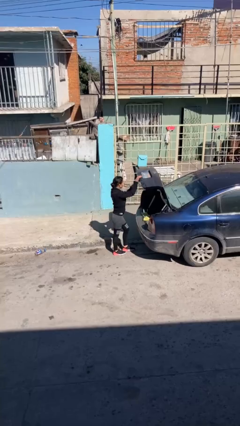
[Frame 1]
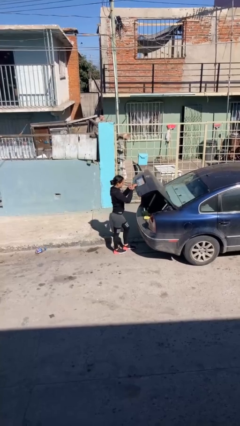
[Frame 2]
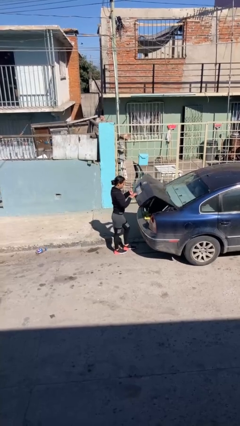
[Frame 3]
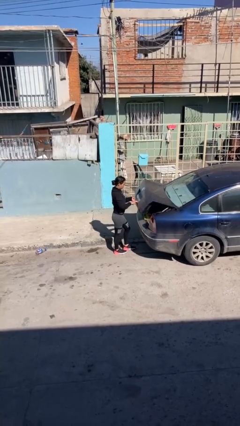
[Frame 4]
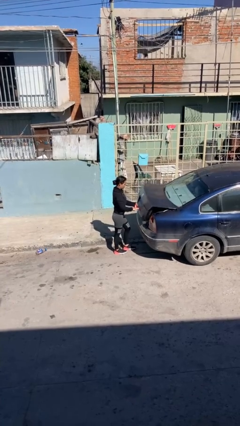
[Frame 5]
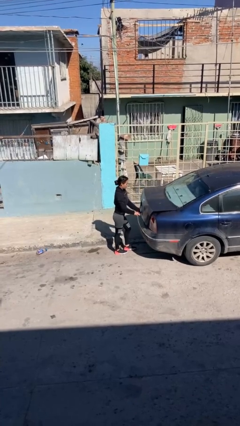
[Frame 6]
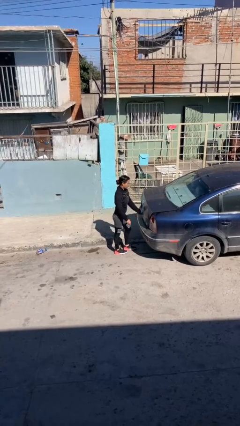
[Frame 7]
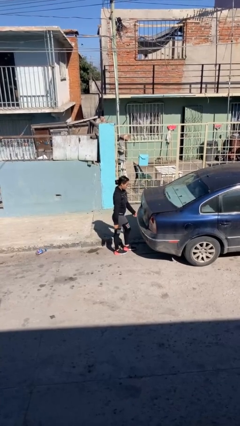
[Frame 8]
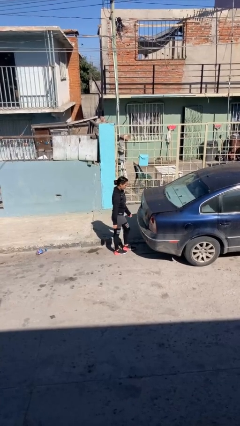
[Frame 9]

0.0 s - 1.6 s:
person closes car trunk

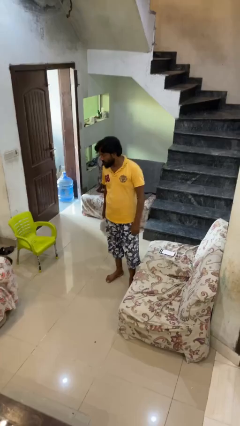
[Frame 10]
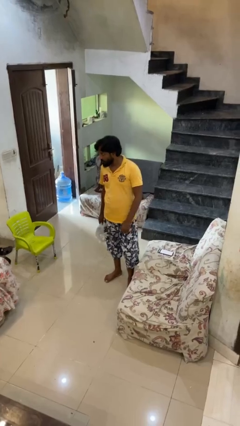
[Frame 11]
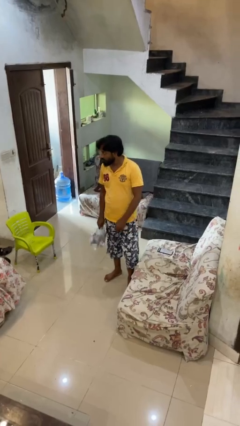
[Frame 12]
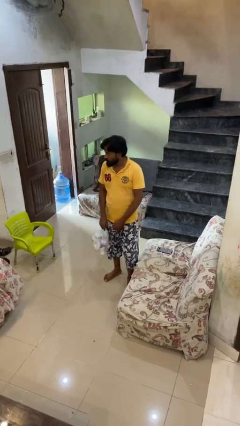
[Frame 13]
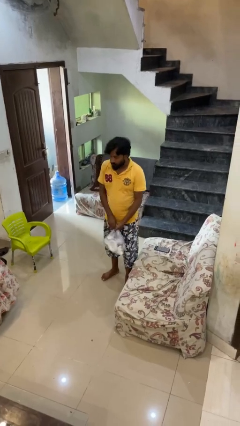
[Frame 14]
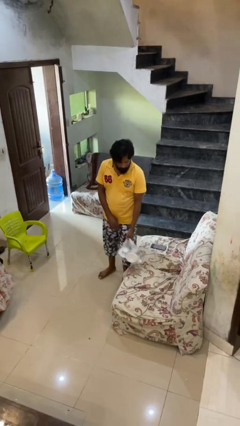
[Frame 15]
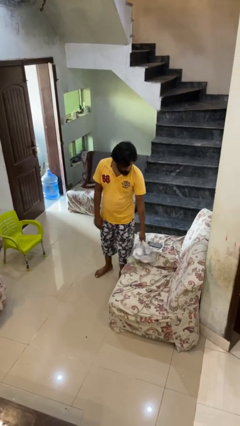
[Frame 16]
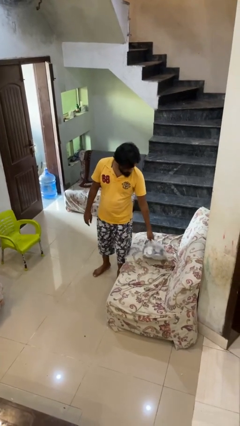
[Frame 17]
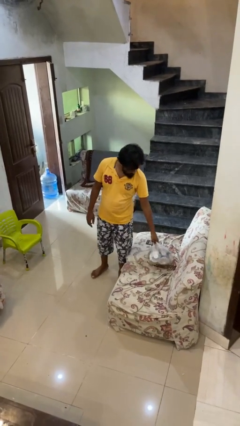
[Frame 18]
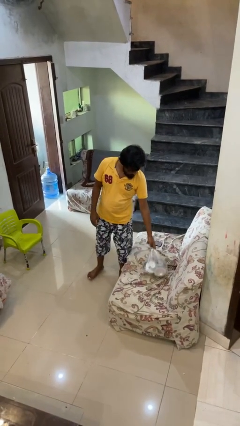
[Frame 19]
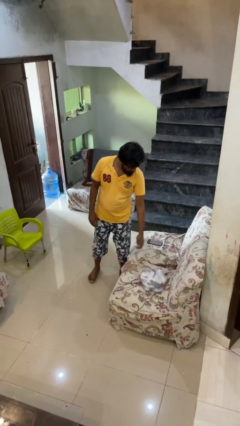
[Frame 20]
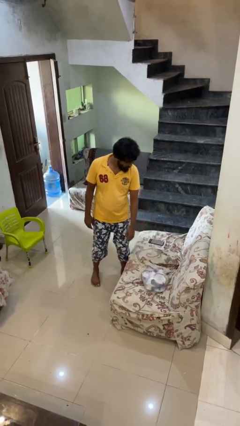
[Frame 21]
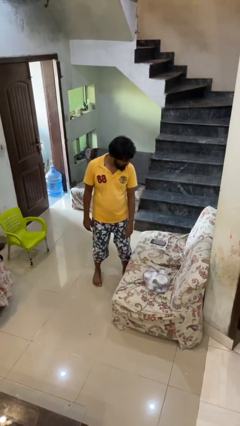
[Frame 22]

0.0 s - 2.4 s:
person puts down object on couch

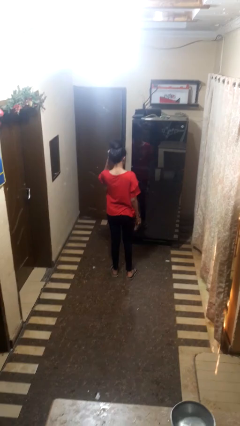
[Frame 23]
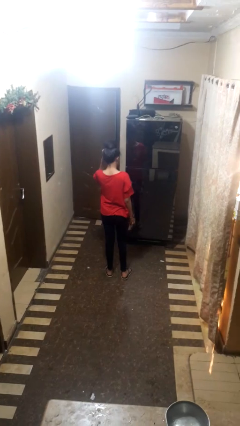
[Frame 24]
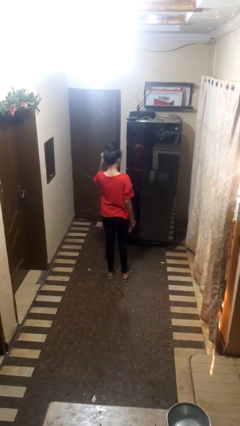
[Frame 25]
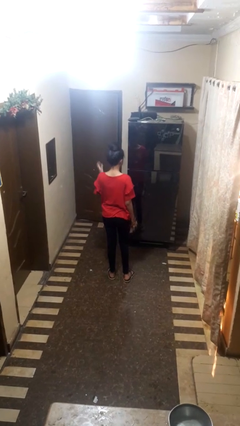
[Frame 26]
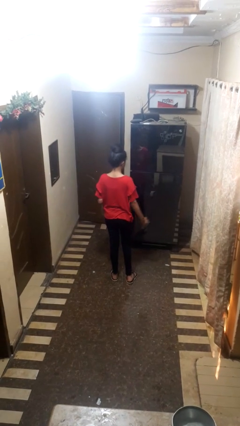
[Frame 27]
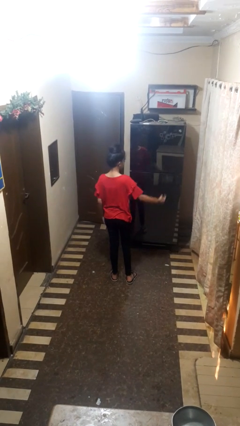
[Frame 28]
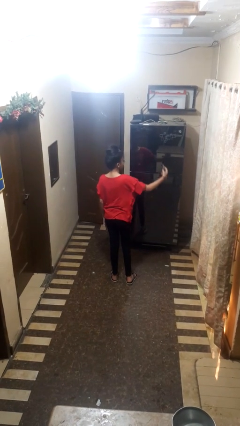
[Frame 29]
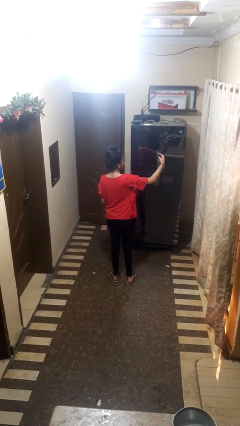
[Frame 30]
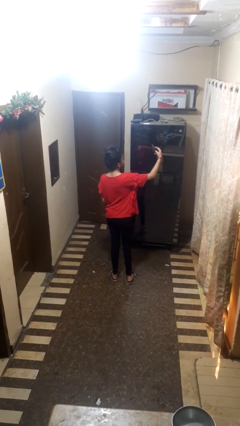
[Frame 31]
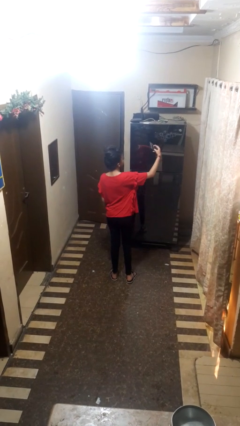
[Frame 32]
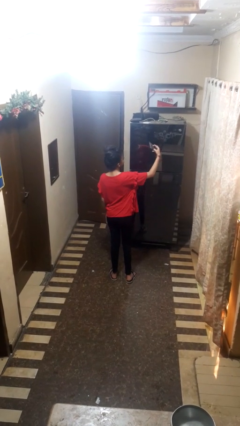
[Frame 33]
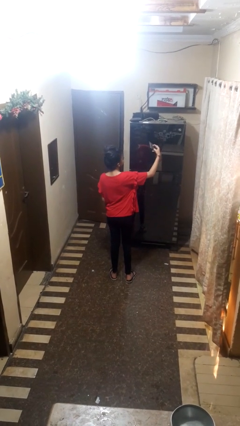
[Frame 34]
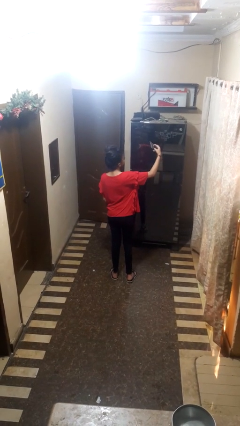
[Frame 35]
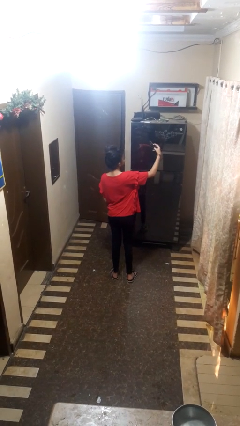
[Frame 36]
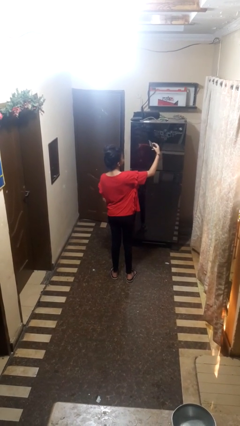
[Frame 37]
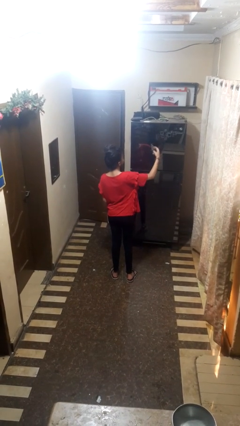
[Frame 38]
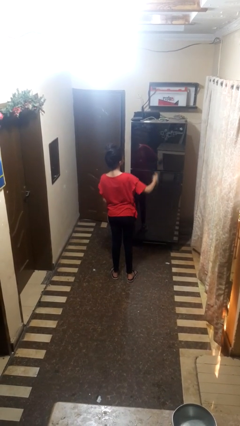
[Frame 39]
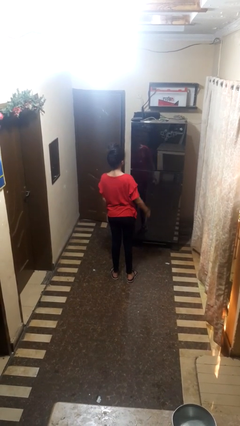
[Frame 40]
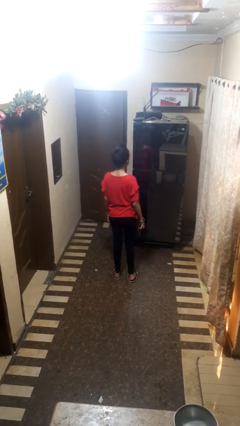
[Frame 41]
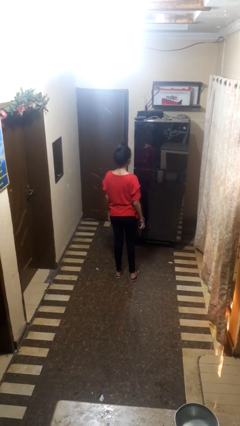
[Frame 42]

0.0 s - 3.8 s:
person takes selfie

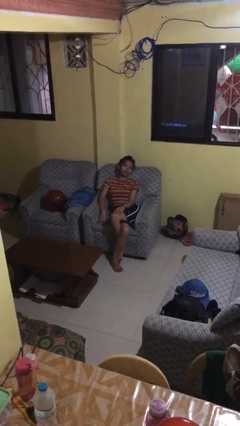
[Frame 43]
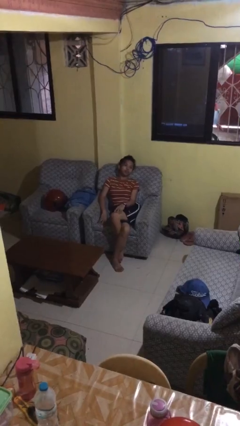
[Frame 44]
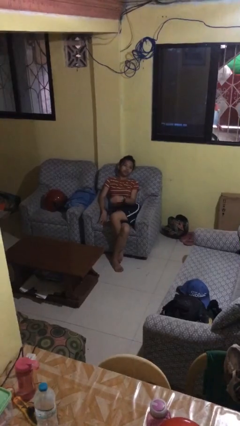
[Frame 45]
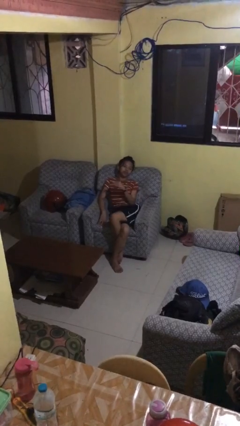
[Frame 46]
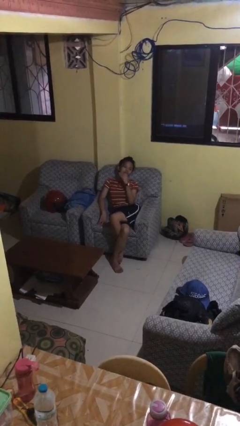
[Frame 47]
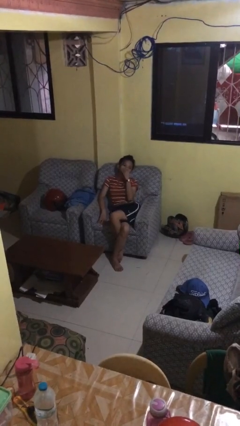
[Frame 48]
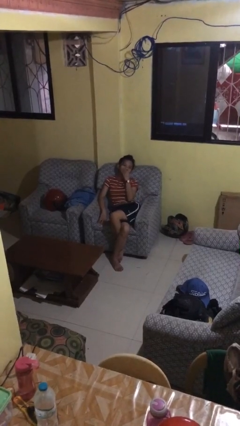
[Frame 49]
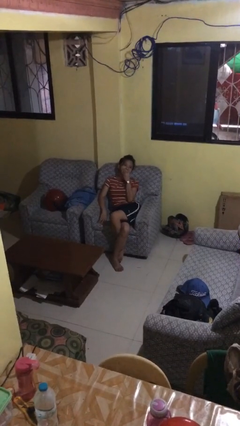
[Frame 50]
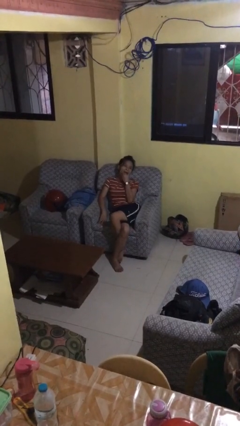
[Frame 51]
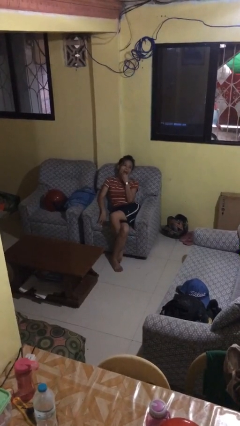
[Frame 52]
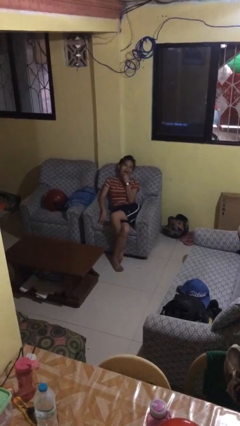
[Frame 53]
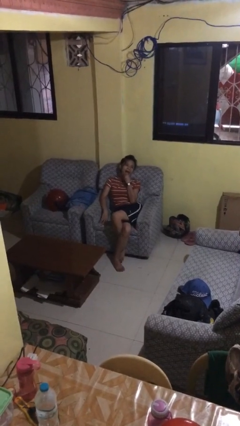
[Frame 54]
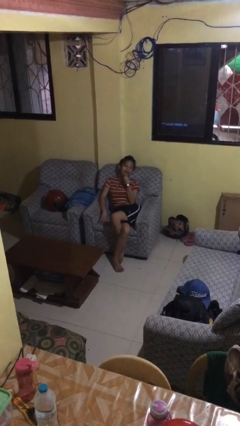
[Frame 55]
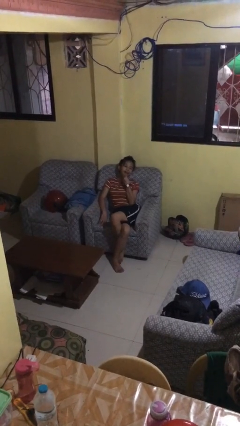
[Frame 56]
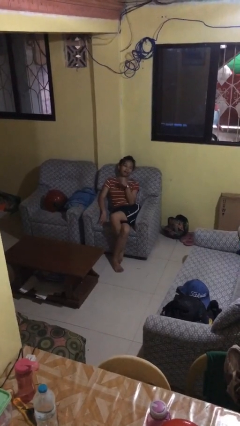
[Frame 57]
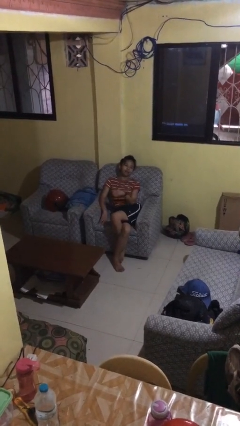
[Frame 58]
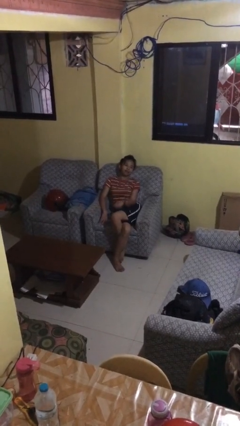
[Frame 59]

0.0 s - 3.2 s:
person strokes chin

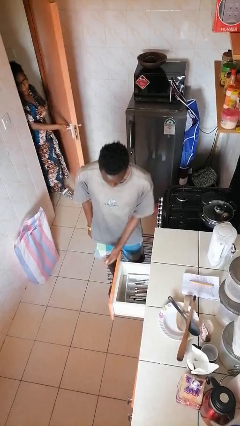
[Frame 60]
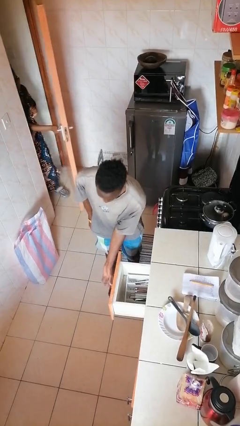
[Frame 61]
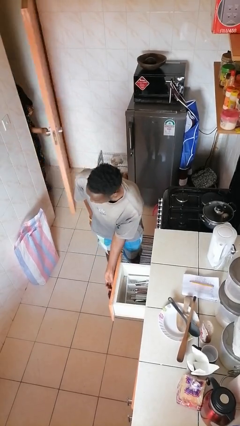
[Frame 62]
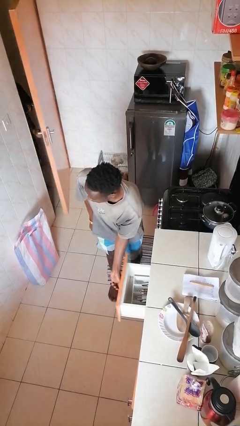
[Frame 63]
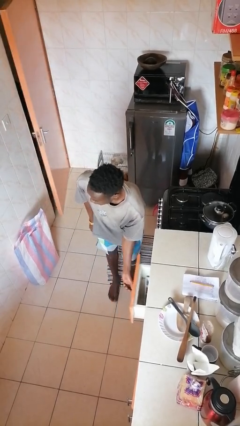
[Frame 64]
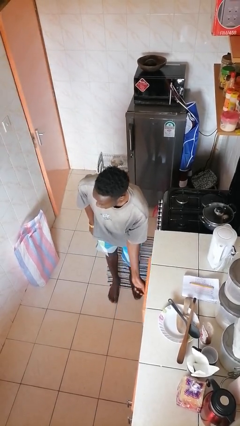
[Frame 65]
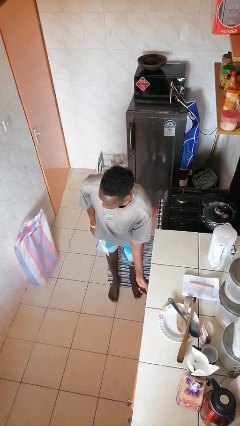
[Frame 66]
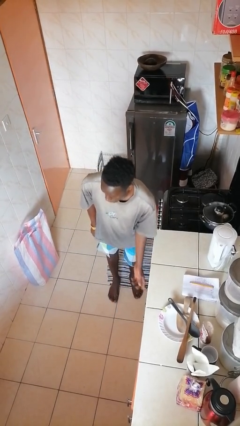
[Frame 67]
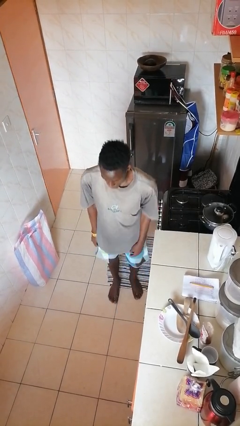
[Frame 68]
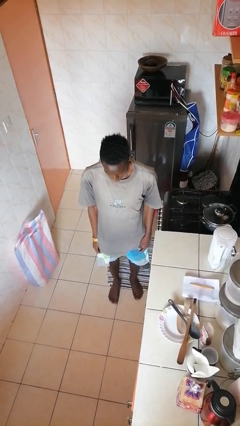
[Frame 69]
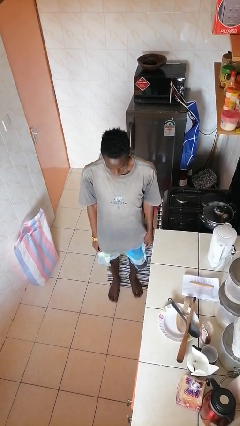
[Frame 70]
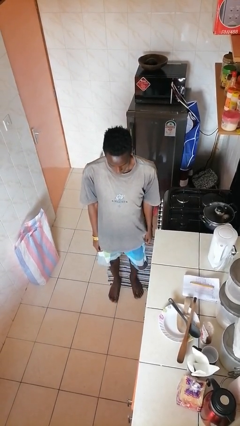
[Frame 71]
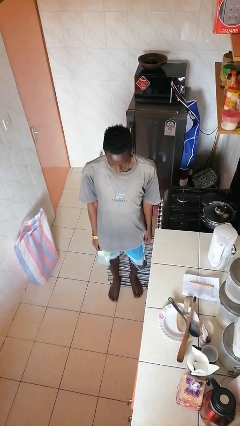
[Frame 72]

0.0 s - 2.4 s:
person closes kitchen drawer

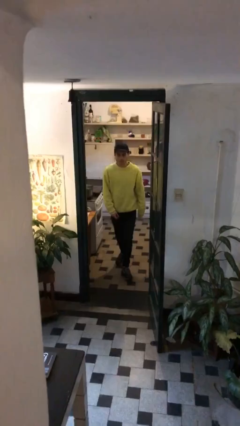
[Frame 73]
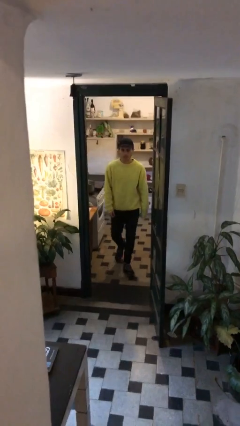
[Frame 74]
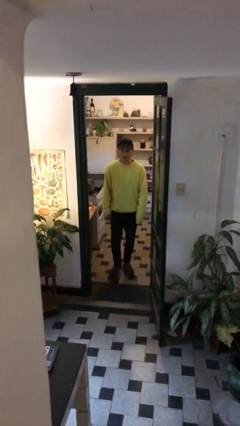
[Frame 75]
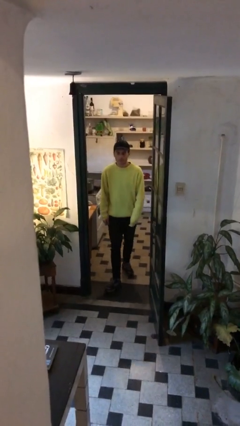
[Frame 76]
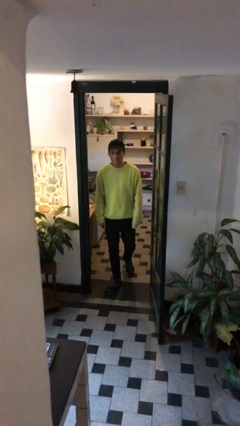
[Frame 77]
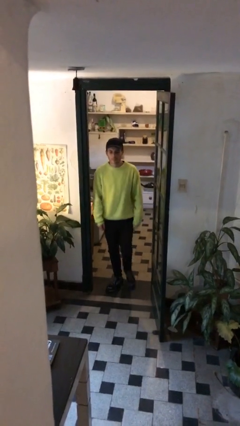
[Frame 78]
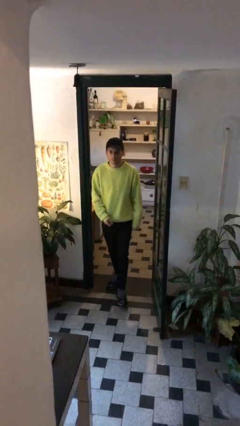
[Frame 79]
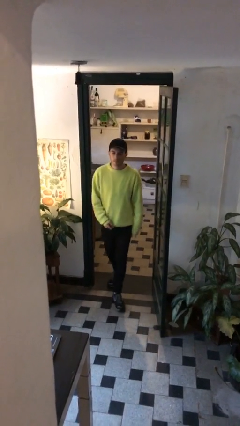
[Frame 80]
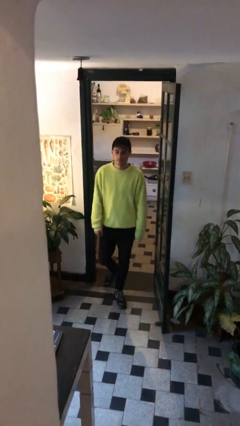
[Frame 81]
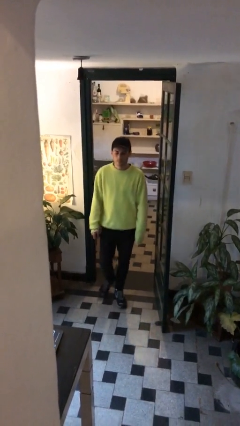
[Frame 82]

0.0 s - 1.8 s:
person enters scene through structure

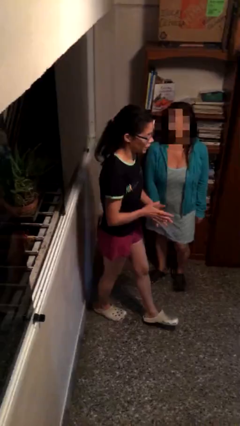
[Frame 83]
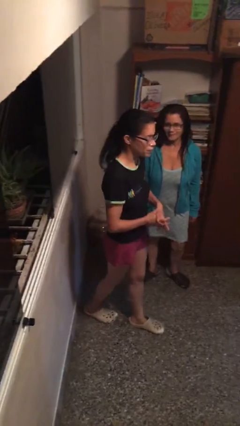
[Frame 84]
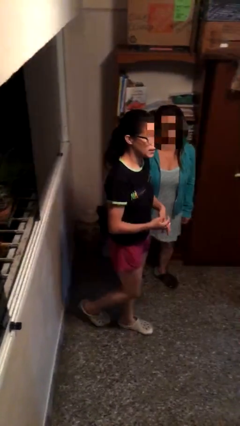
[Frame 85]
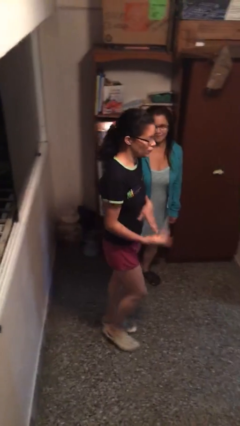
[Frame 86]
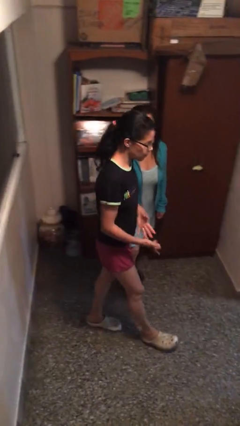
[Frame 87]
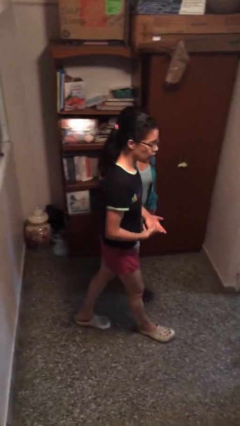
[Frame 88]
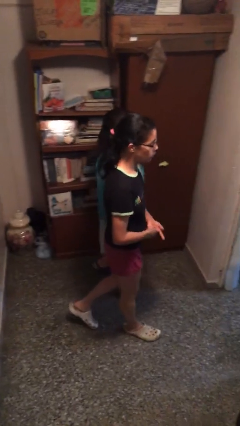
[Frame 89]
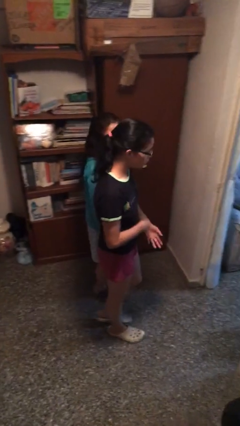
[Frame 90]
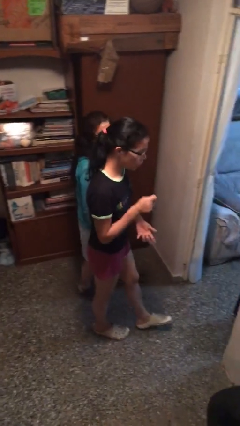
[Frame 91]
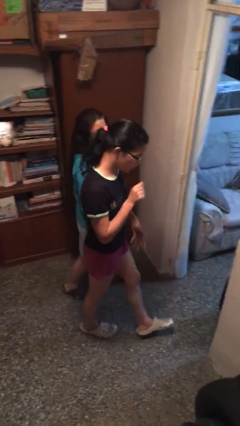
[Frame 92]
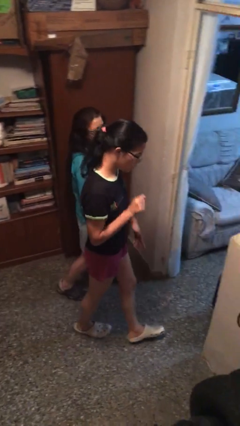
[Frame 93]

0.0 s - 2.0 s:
person talks to person

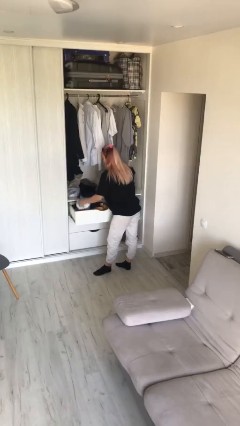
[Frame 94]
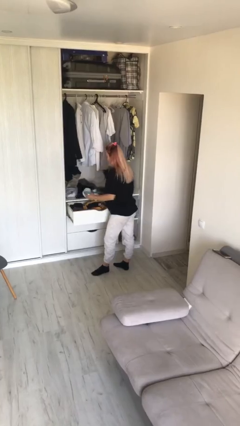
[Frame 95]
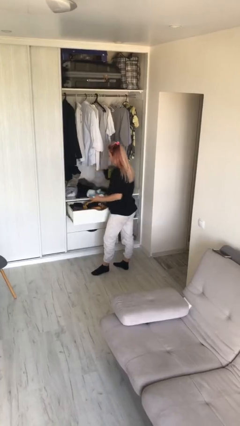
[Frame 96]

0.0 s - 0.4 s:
person takes clothes from dresser
